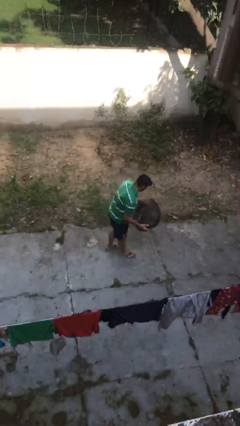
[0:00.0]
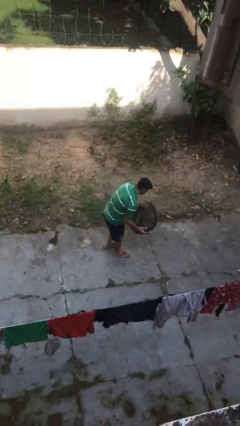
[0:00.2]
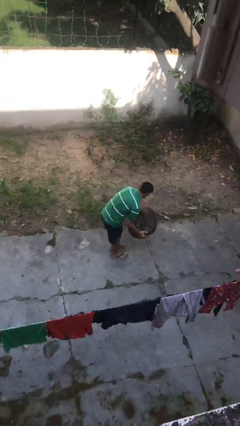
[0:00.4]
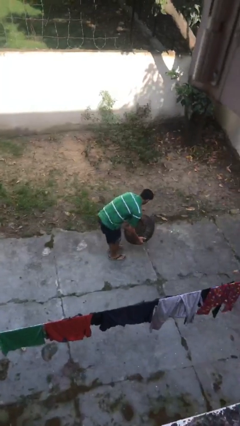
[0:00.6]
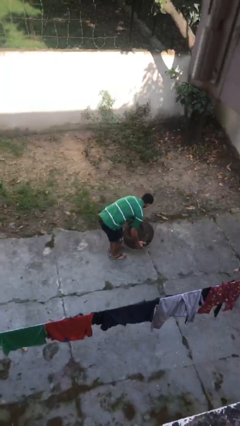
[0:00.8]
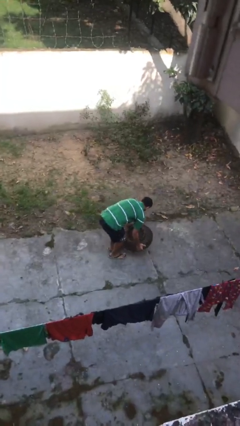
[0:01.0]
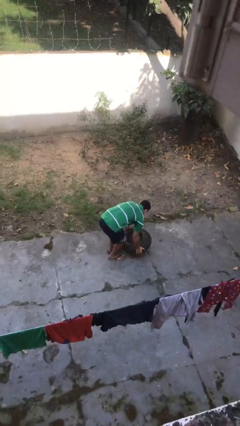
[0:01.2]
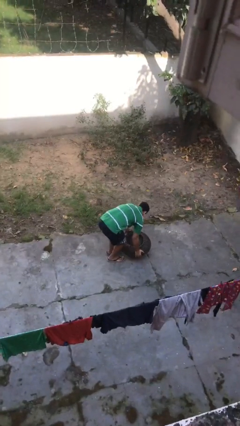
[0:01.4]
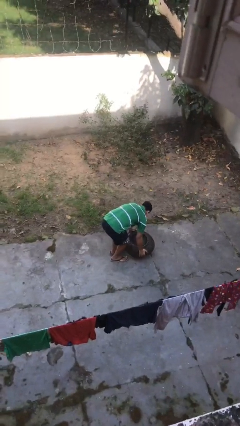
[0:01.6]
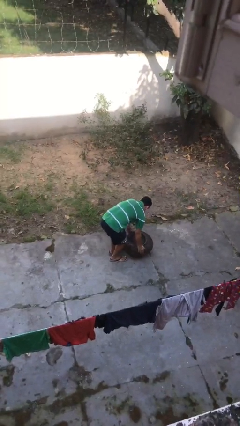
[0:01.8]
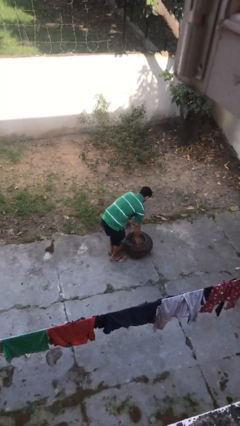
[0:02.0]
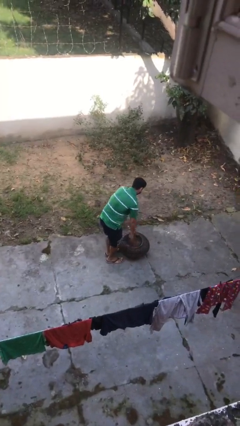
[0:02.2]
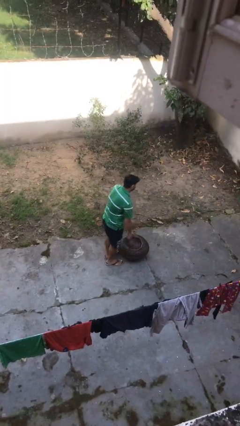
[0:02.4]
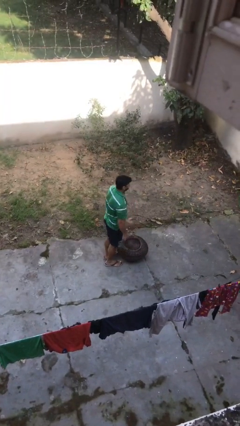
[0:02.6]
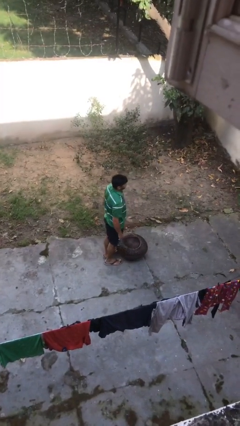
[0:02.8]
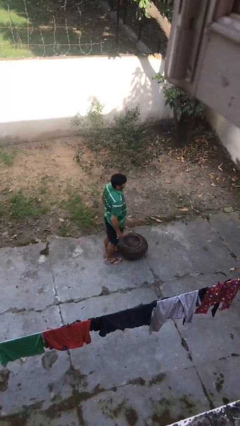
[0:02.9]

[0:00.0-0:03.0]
person puts down object on floor

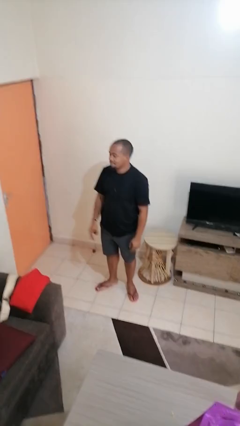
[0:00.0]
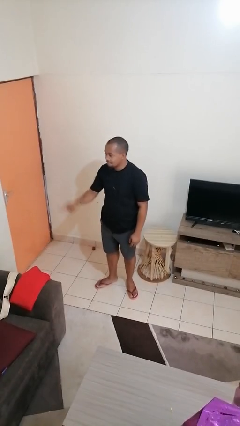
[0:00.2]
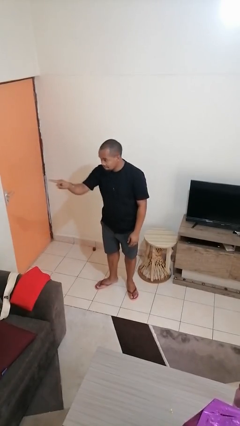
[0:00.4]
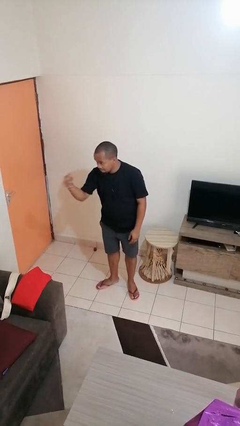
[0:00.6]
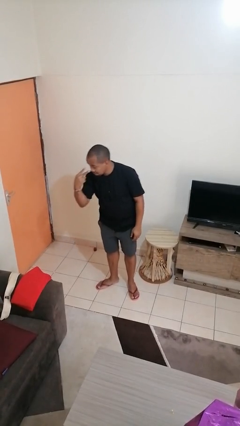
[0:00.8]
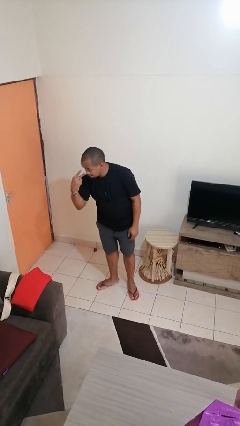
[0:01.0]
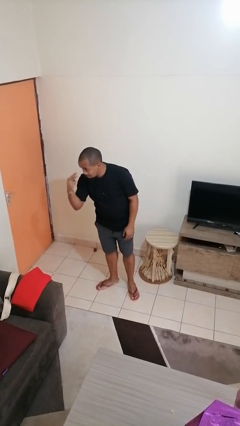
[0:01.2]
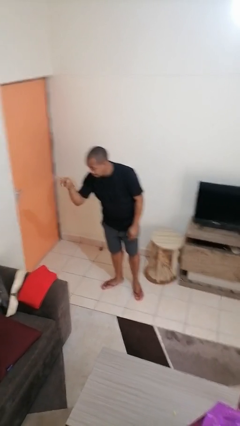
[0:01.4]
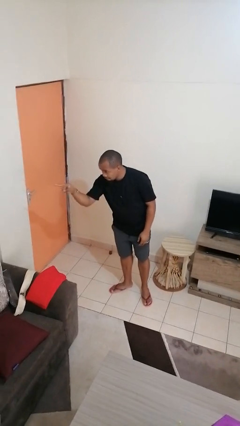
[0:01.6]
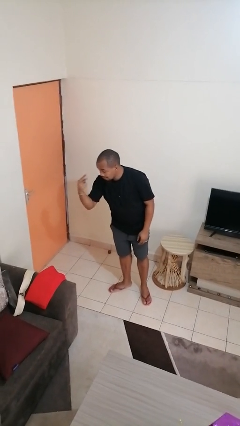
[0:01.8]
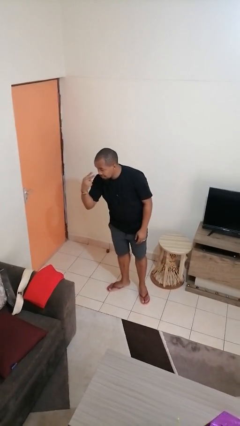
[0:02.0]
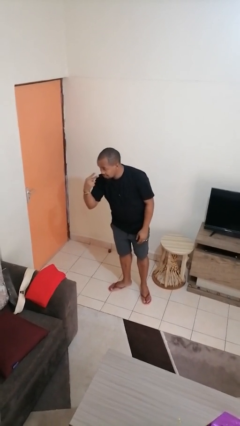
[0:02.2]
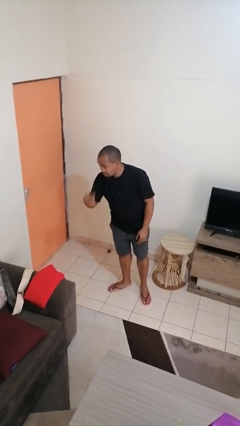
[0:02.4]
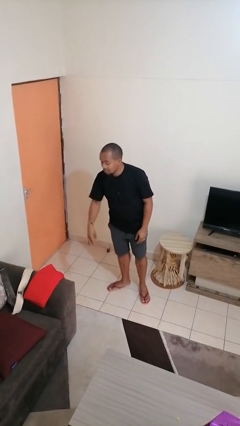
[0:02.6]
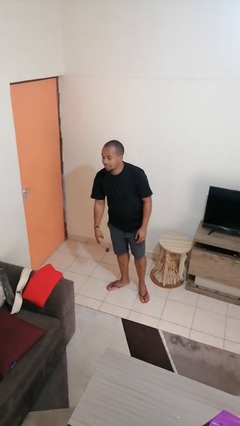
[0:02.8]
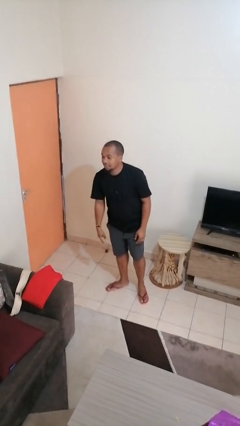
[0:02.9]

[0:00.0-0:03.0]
person gestures watch closely

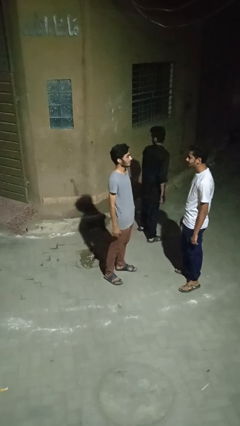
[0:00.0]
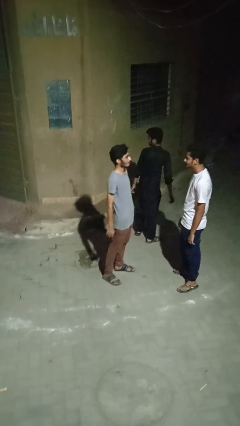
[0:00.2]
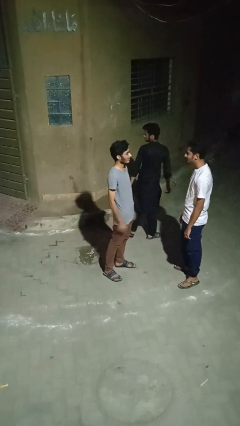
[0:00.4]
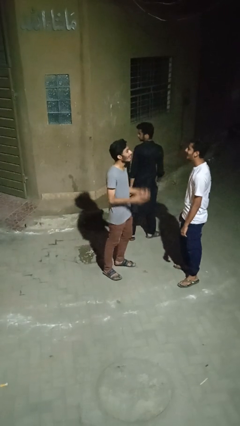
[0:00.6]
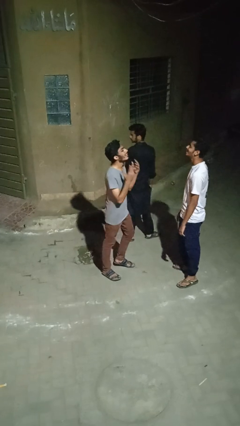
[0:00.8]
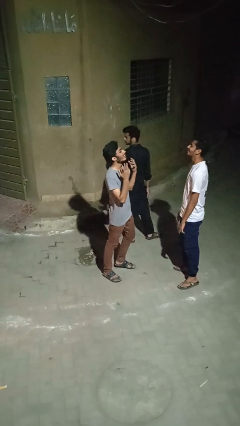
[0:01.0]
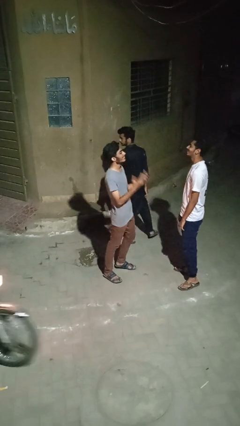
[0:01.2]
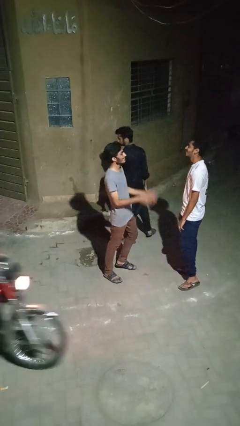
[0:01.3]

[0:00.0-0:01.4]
person laughs with person

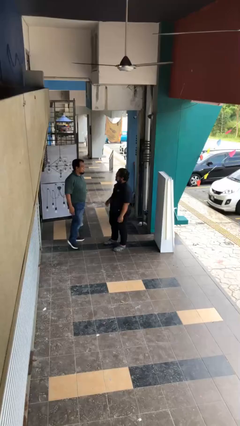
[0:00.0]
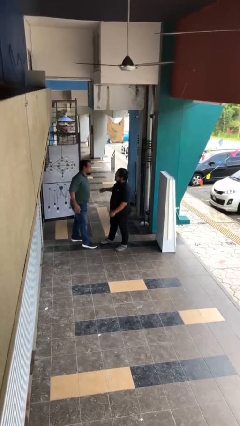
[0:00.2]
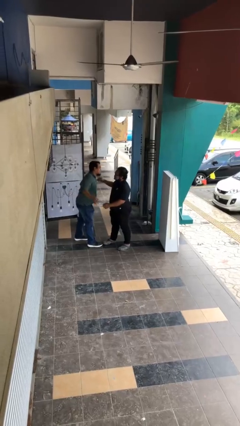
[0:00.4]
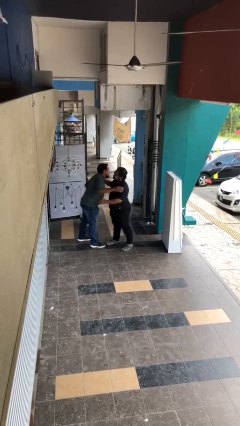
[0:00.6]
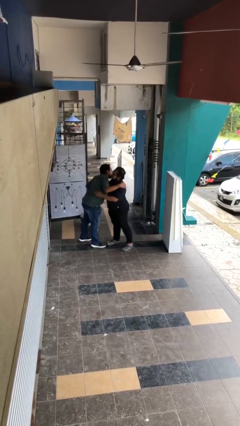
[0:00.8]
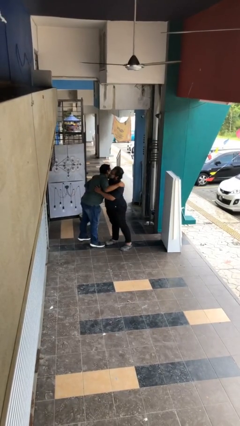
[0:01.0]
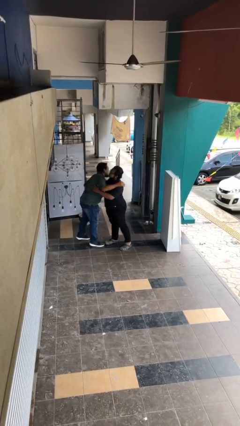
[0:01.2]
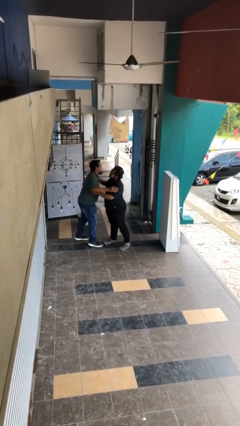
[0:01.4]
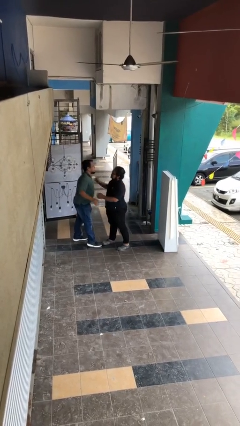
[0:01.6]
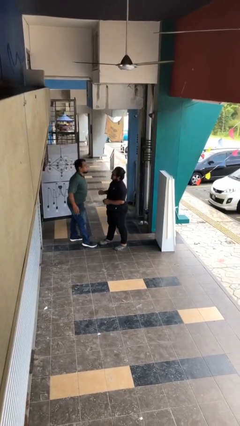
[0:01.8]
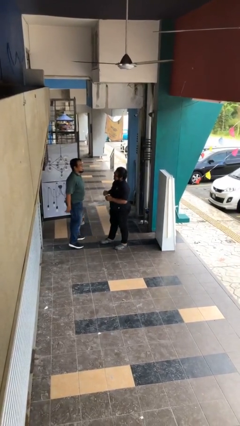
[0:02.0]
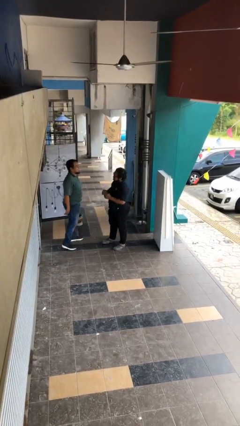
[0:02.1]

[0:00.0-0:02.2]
person embraces person

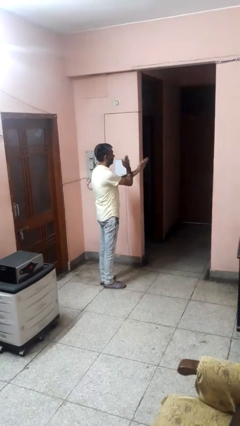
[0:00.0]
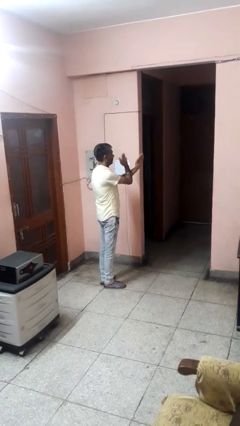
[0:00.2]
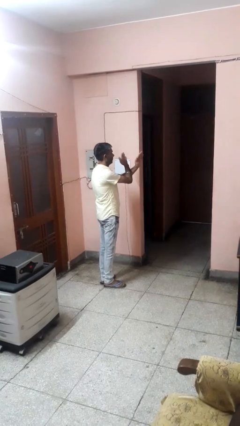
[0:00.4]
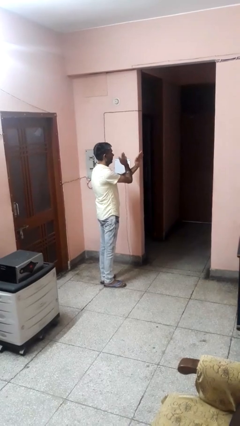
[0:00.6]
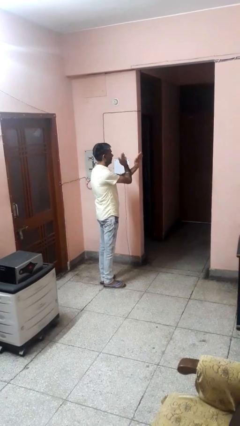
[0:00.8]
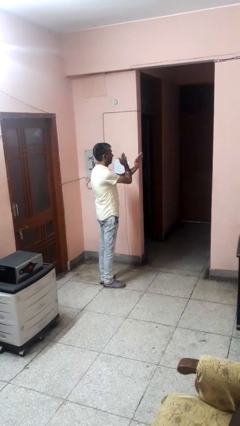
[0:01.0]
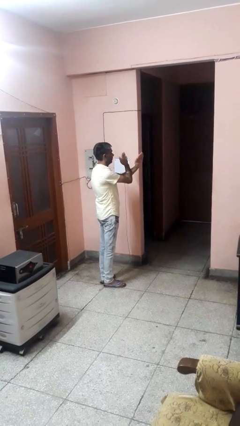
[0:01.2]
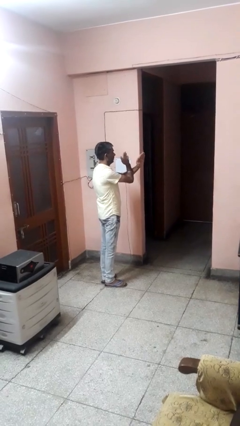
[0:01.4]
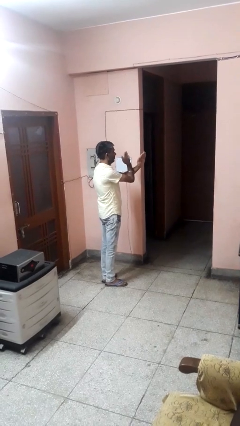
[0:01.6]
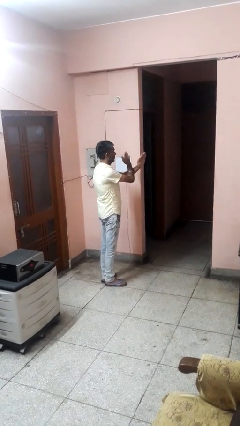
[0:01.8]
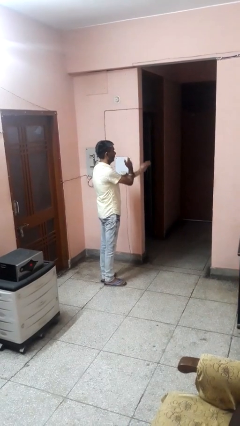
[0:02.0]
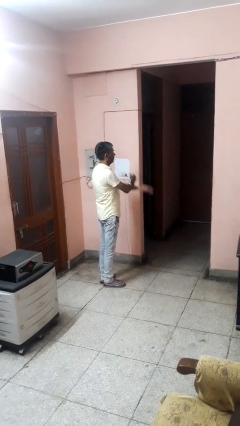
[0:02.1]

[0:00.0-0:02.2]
person gestures arms x

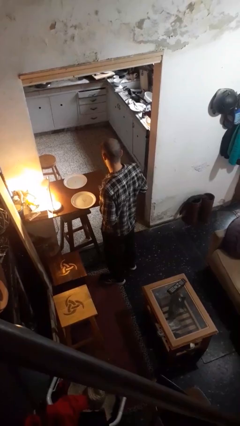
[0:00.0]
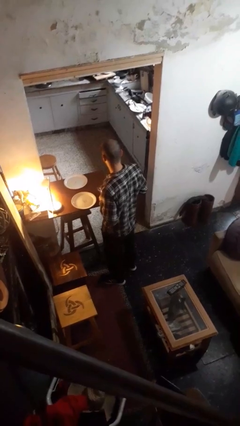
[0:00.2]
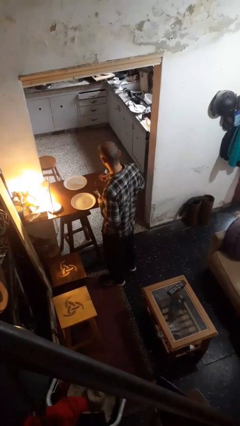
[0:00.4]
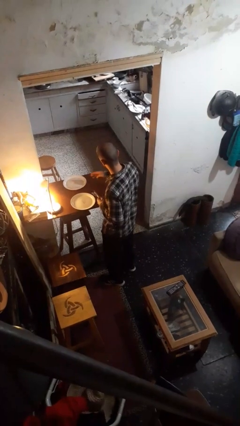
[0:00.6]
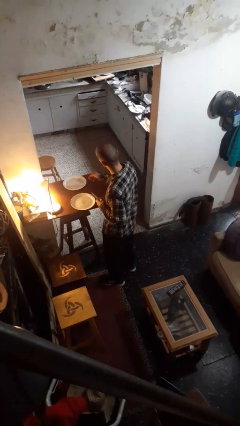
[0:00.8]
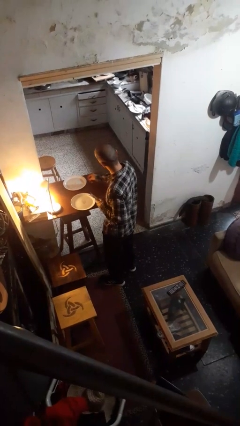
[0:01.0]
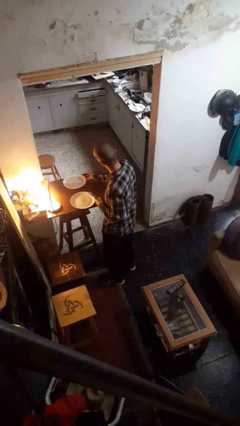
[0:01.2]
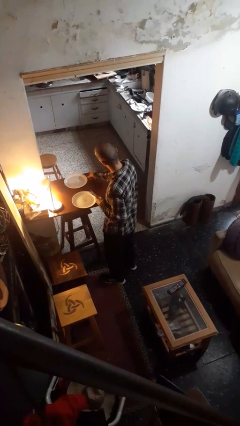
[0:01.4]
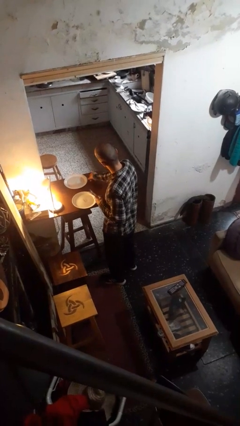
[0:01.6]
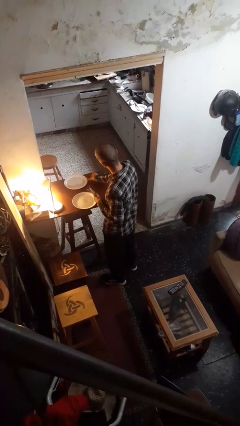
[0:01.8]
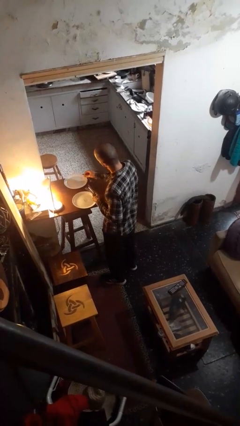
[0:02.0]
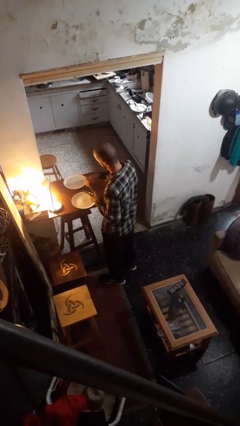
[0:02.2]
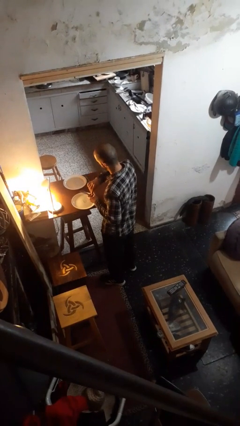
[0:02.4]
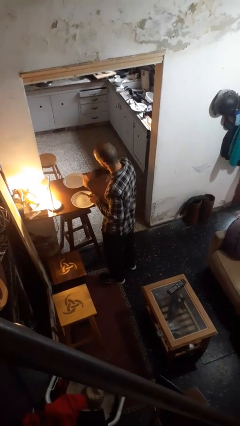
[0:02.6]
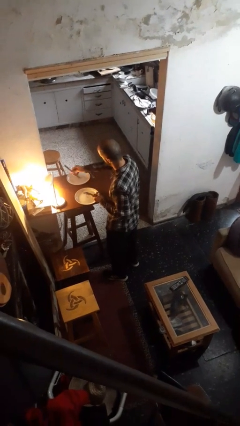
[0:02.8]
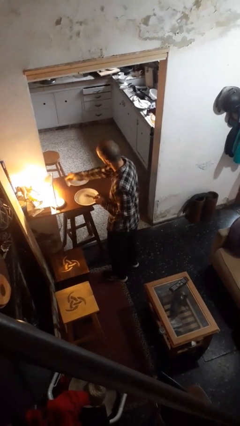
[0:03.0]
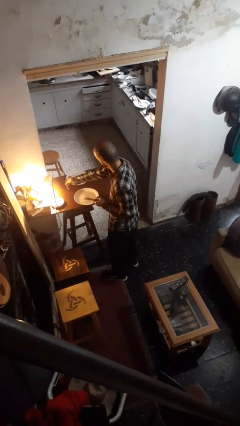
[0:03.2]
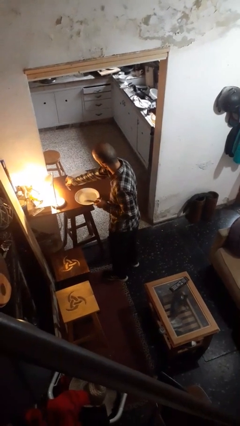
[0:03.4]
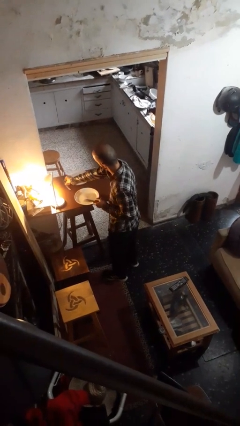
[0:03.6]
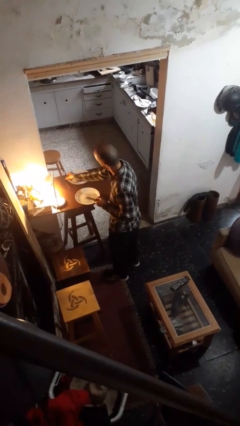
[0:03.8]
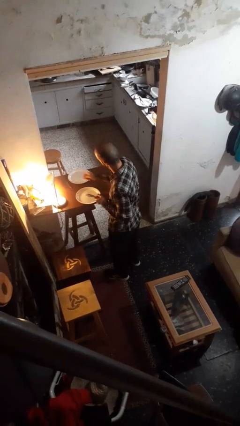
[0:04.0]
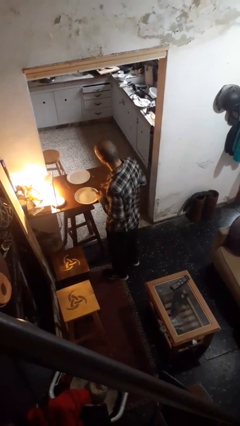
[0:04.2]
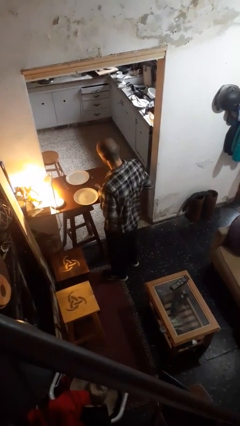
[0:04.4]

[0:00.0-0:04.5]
person sets table

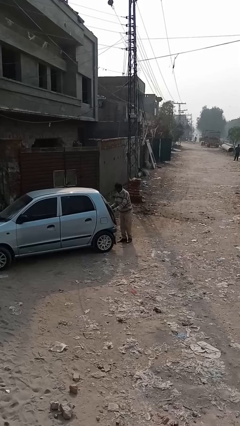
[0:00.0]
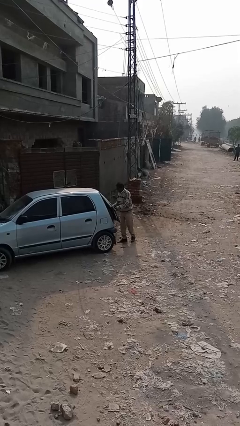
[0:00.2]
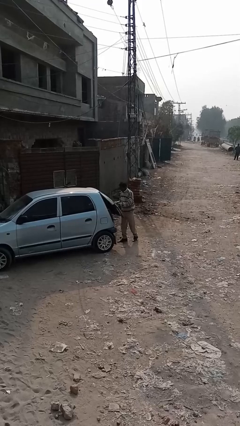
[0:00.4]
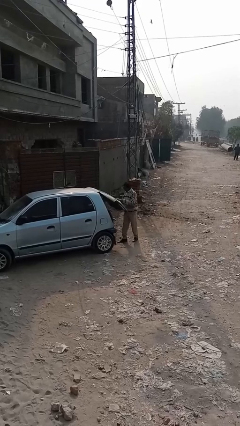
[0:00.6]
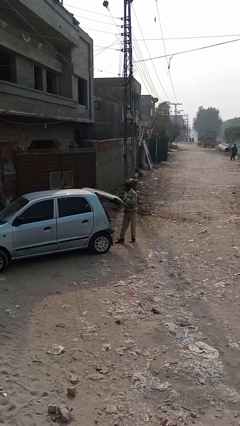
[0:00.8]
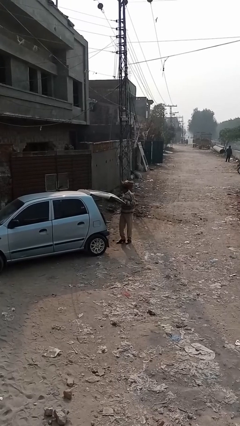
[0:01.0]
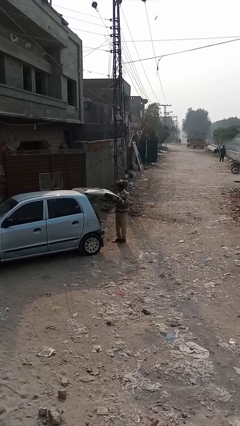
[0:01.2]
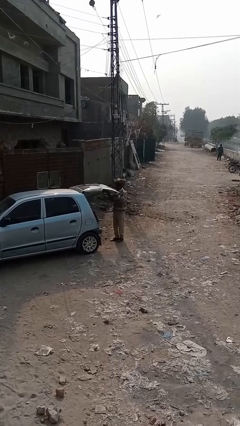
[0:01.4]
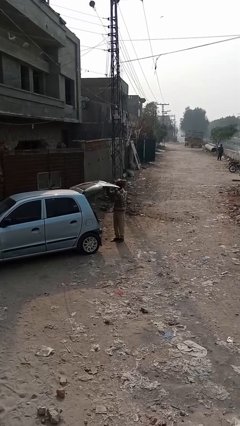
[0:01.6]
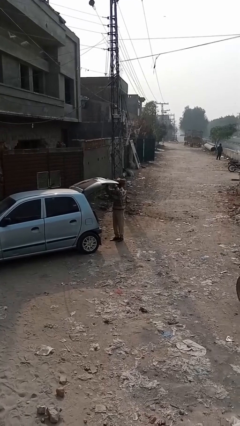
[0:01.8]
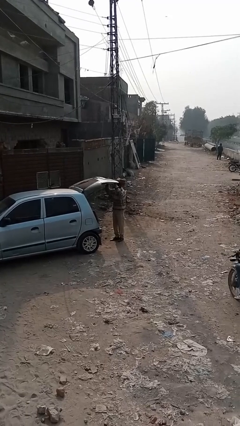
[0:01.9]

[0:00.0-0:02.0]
person opens car trunk
